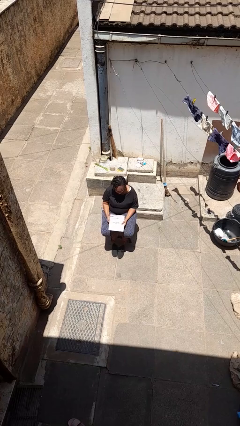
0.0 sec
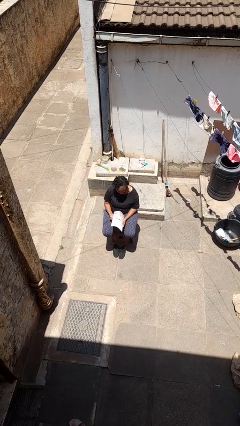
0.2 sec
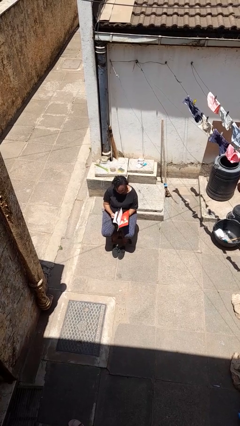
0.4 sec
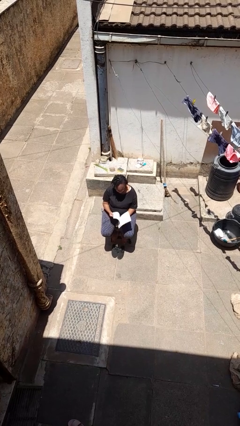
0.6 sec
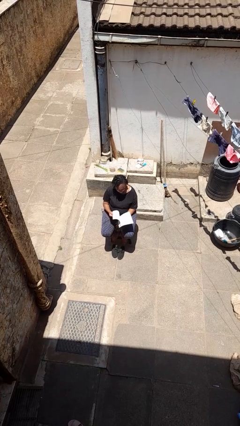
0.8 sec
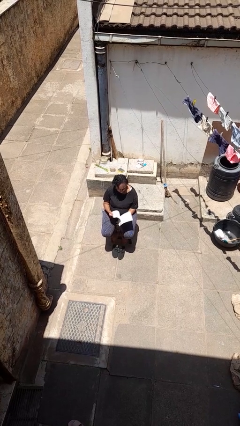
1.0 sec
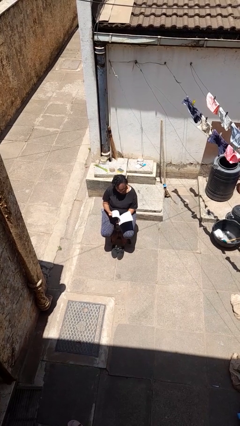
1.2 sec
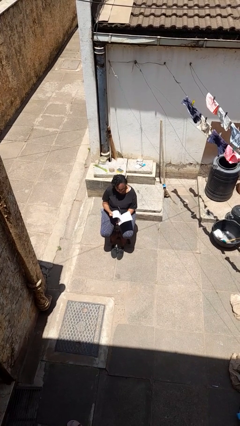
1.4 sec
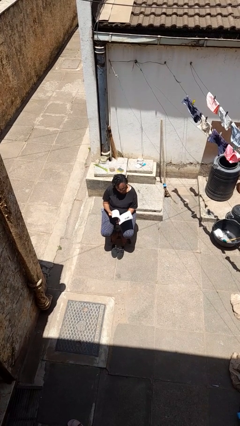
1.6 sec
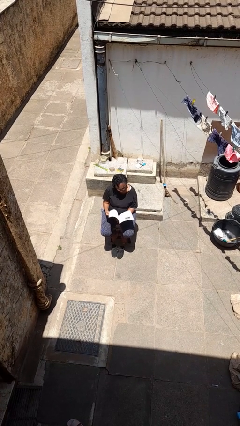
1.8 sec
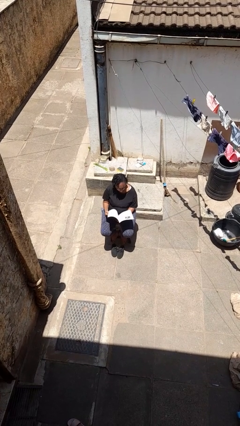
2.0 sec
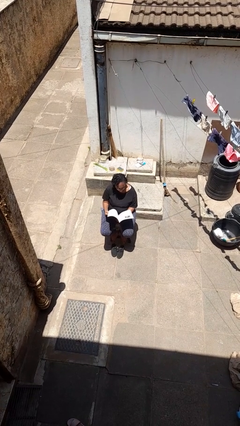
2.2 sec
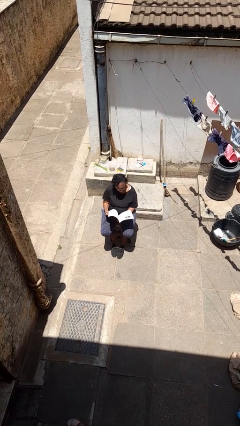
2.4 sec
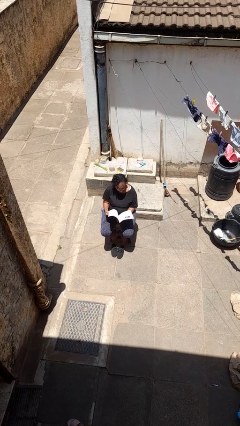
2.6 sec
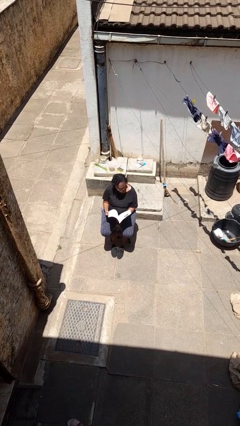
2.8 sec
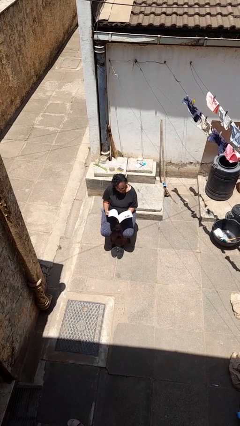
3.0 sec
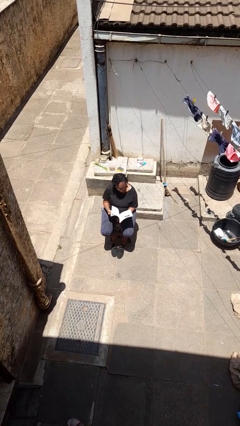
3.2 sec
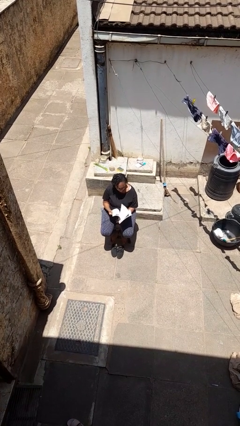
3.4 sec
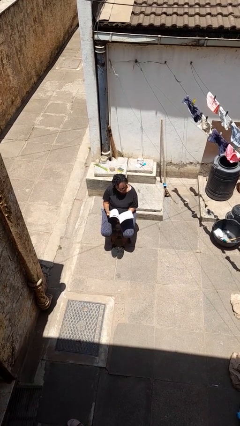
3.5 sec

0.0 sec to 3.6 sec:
person reads magazine

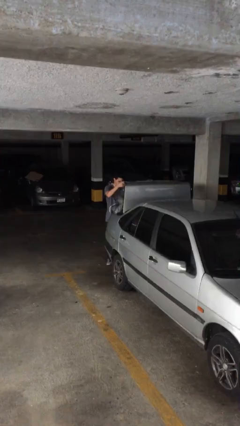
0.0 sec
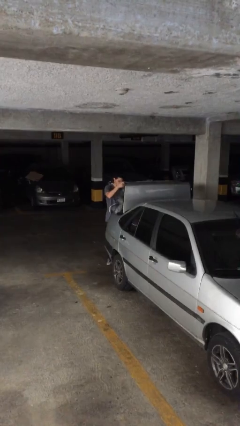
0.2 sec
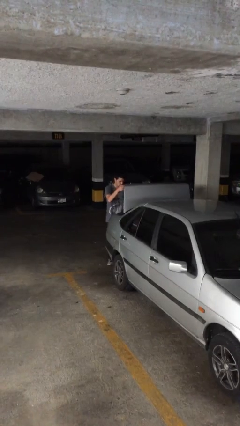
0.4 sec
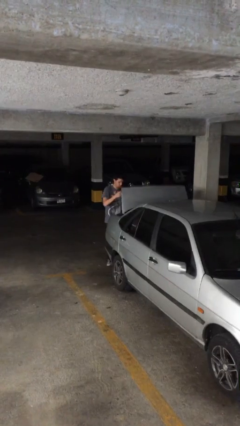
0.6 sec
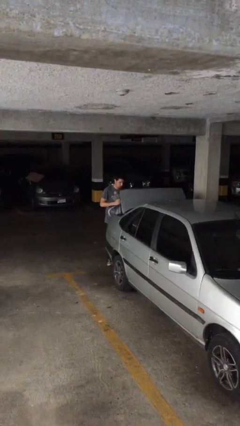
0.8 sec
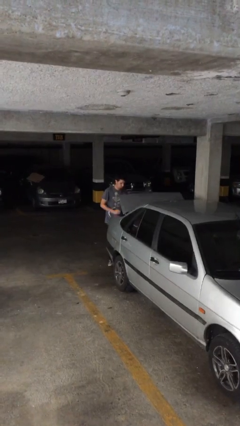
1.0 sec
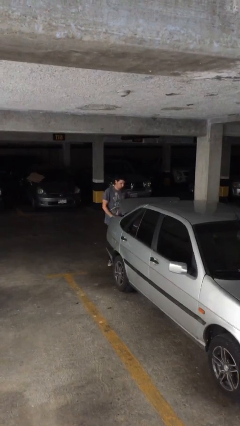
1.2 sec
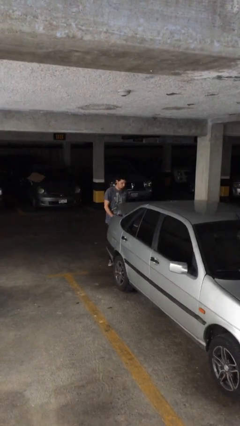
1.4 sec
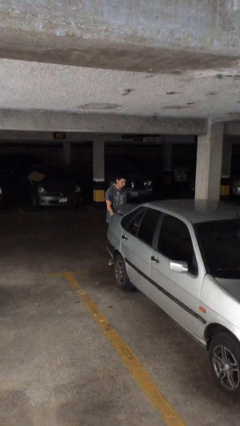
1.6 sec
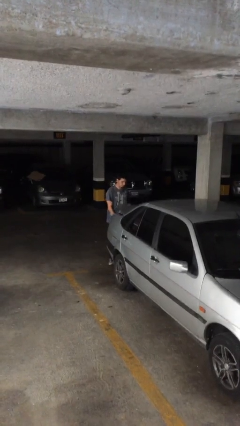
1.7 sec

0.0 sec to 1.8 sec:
person closes car trunk

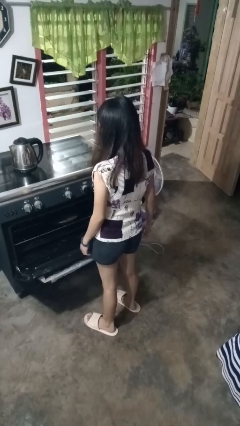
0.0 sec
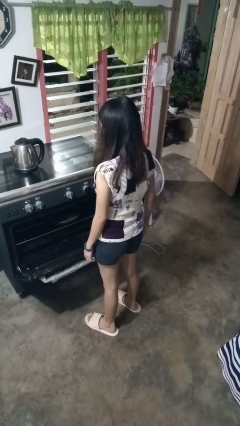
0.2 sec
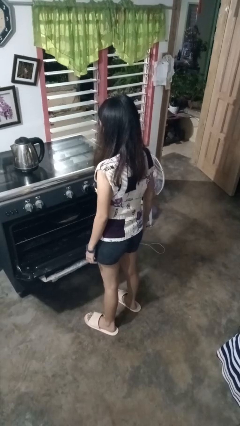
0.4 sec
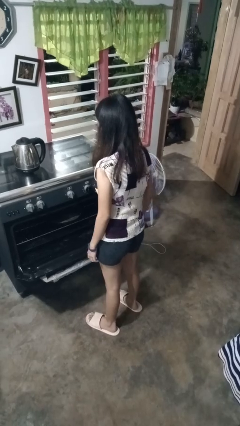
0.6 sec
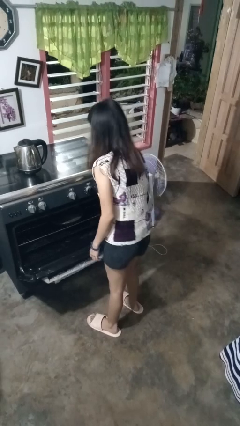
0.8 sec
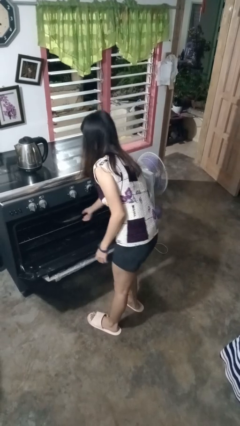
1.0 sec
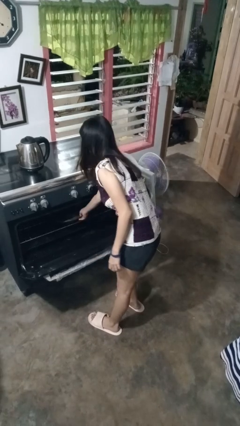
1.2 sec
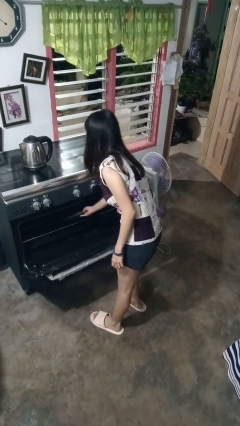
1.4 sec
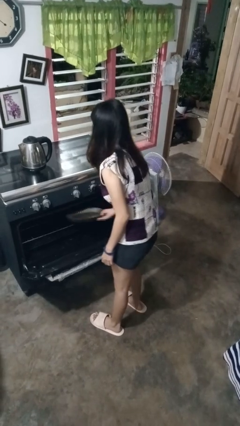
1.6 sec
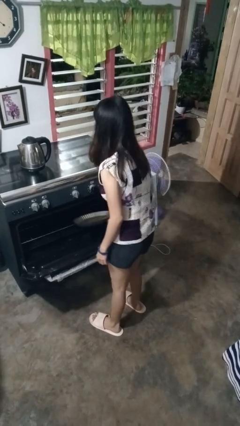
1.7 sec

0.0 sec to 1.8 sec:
person takes object from oven

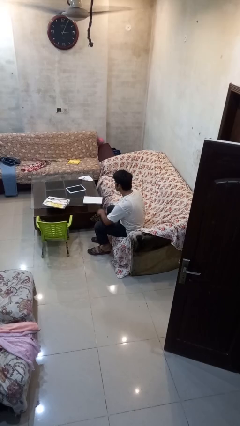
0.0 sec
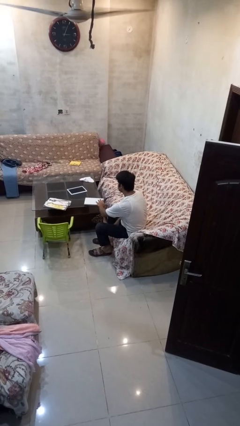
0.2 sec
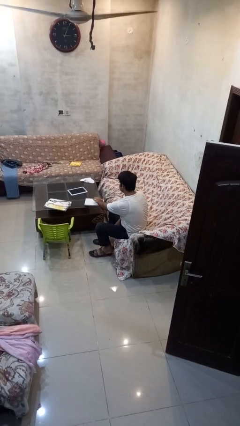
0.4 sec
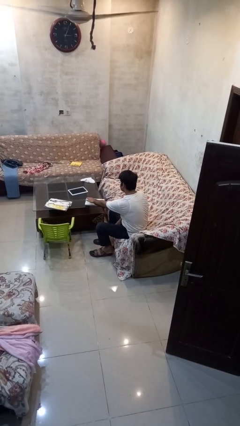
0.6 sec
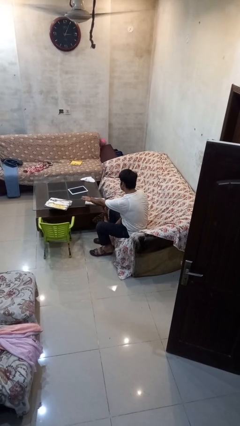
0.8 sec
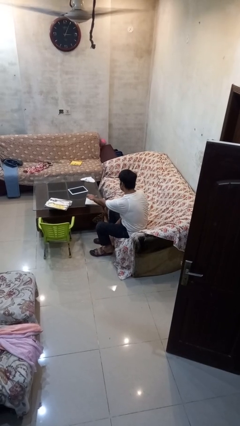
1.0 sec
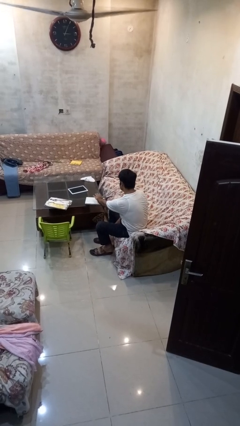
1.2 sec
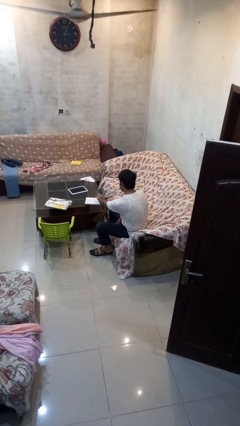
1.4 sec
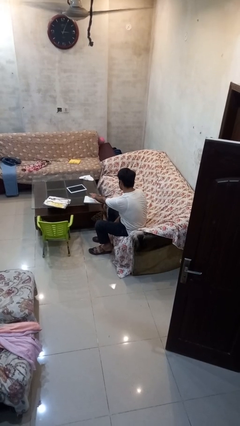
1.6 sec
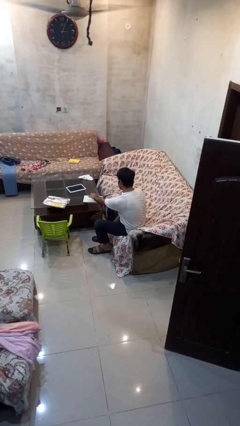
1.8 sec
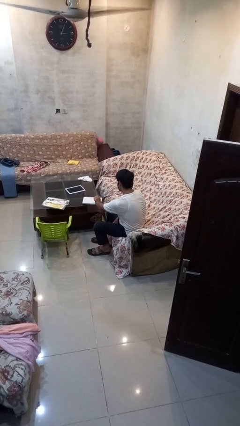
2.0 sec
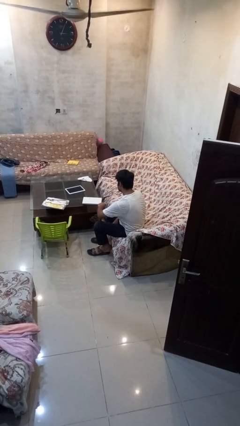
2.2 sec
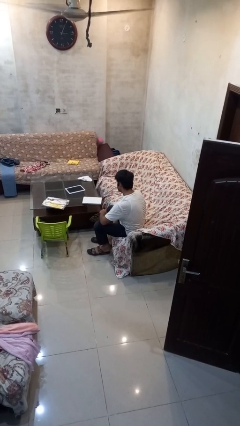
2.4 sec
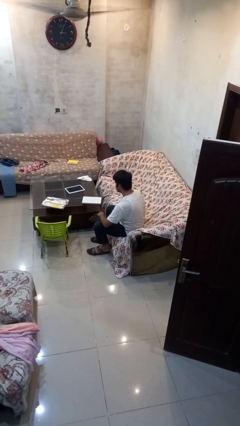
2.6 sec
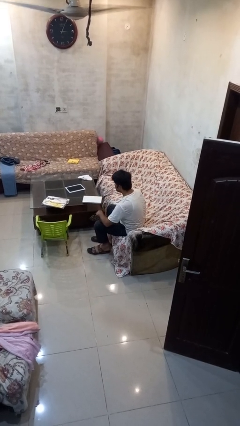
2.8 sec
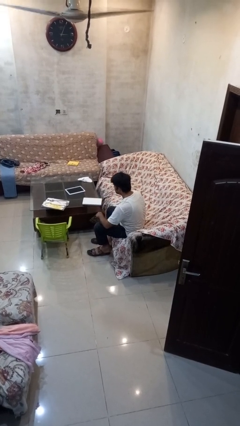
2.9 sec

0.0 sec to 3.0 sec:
person waves hand over object

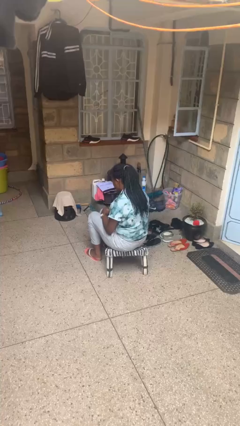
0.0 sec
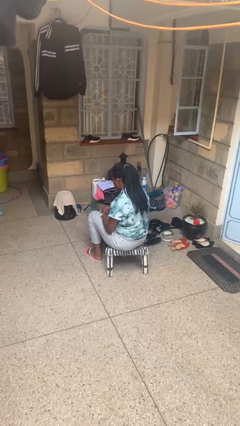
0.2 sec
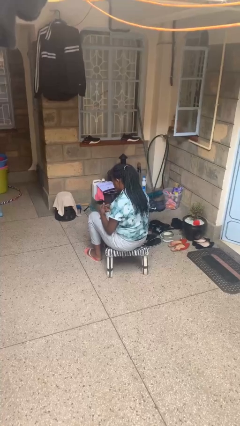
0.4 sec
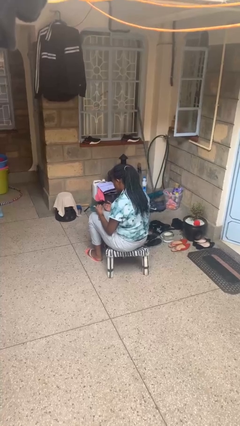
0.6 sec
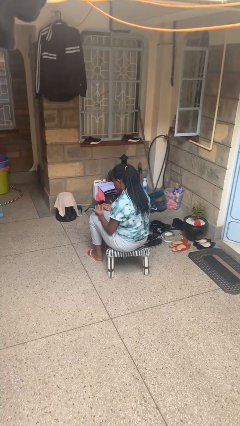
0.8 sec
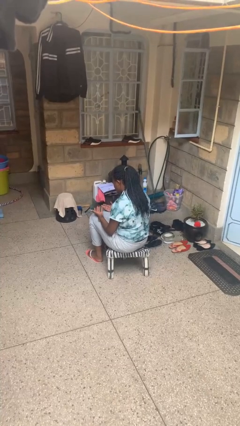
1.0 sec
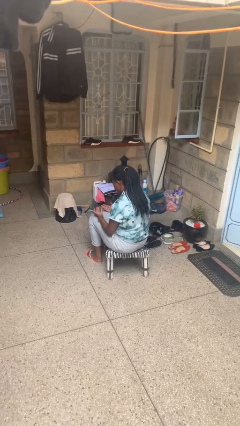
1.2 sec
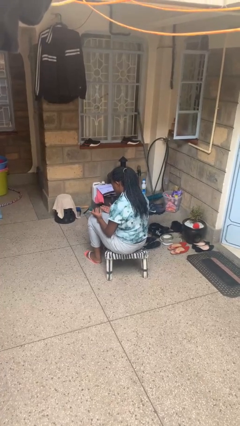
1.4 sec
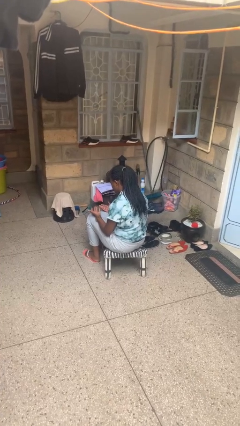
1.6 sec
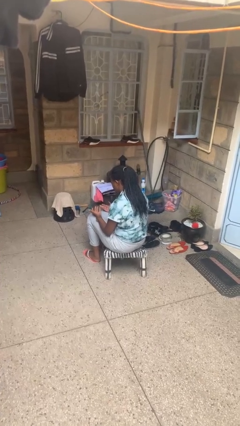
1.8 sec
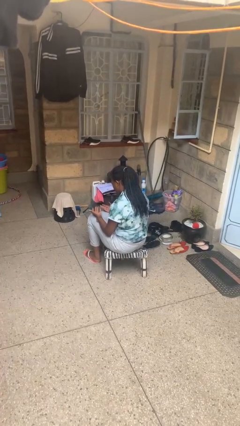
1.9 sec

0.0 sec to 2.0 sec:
person looks at hands in lap

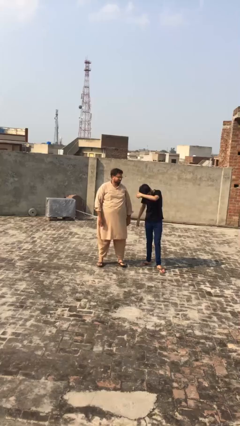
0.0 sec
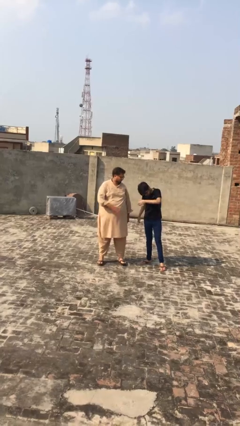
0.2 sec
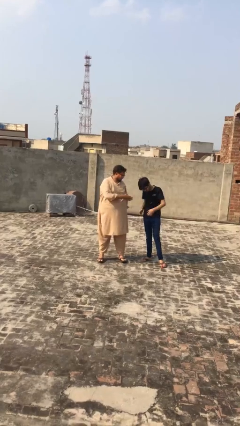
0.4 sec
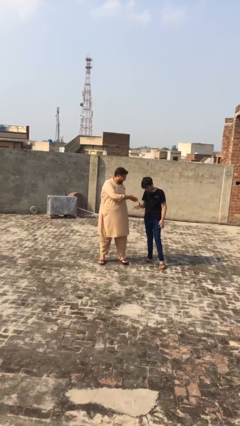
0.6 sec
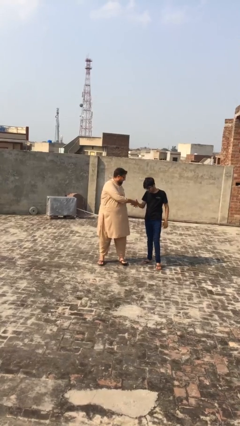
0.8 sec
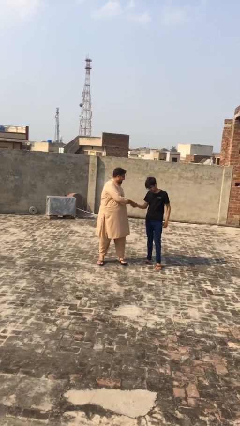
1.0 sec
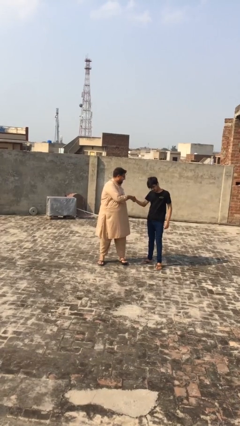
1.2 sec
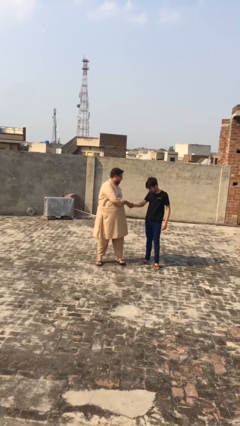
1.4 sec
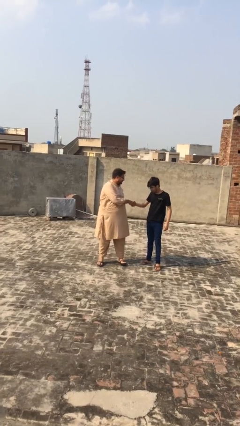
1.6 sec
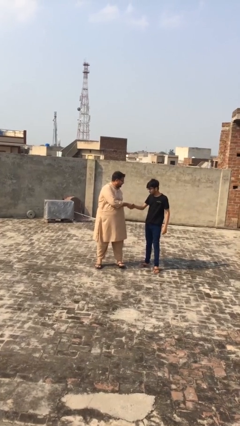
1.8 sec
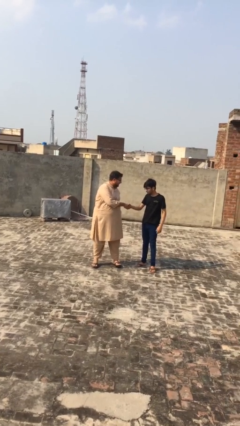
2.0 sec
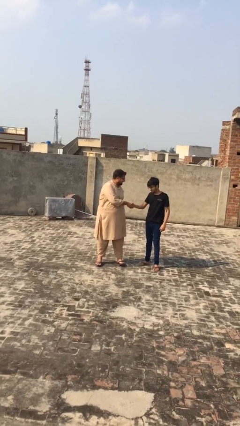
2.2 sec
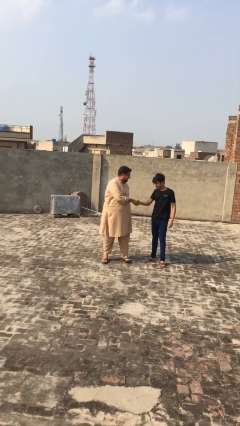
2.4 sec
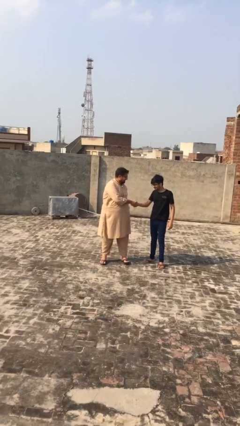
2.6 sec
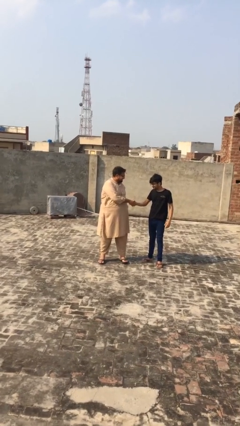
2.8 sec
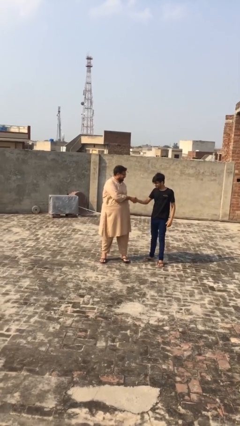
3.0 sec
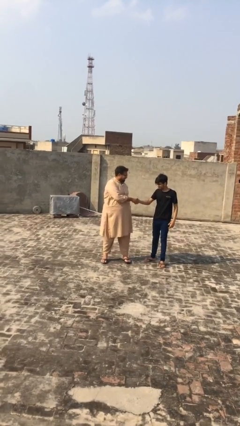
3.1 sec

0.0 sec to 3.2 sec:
person shakes hand

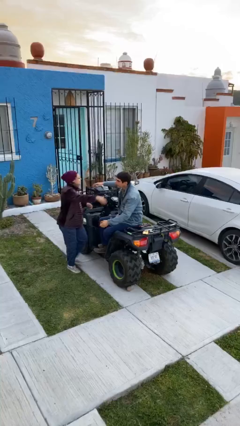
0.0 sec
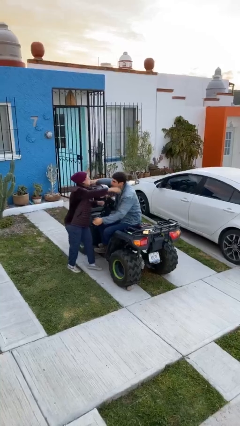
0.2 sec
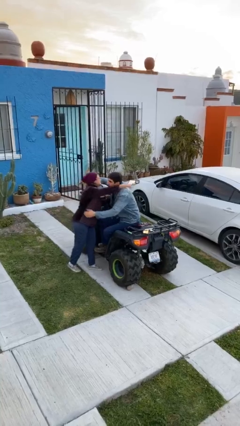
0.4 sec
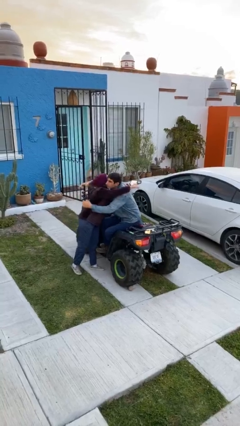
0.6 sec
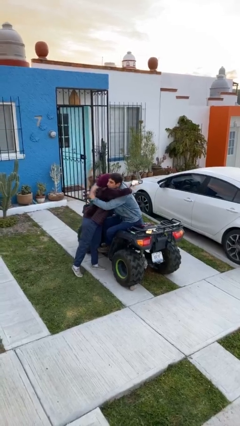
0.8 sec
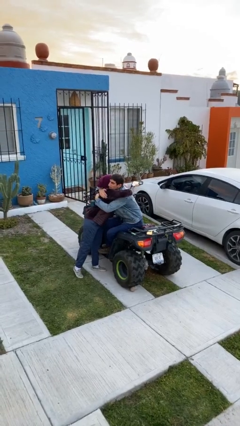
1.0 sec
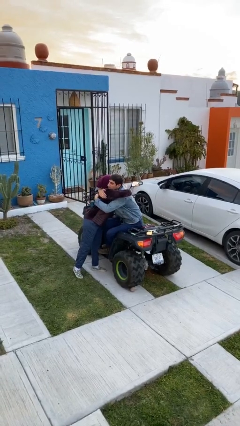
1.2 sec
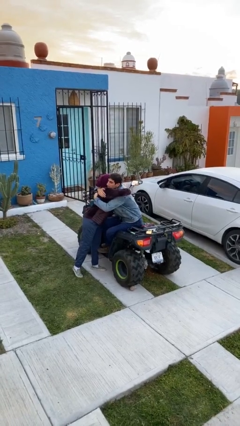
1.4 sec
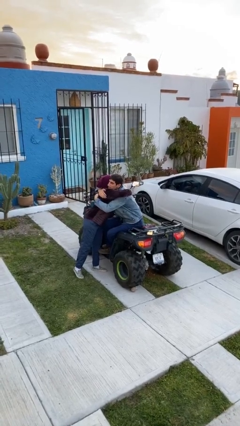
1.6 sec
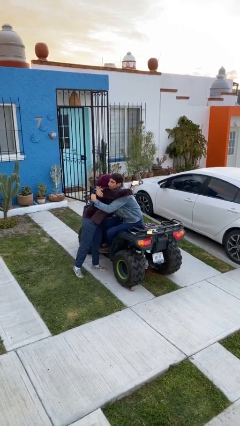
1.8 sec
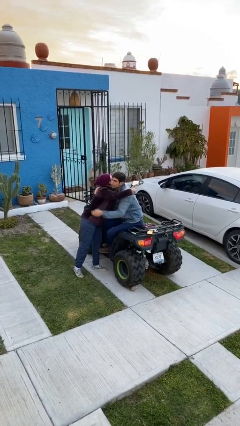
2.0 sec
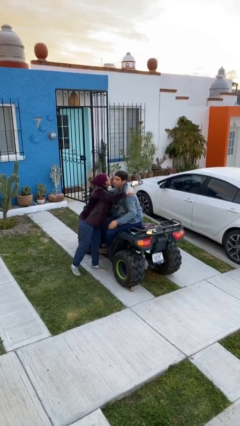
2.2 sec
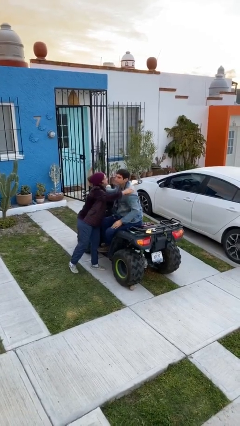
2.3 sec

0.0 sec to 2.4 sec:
person embraces person
